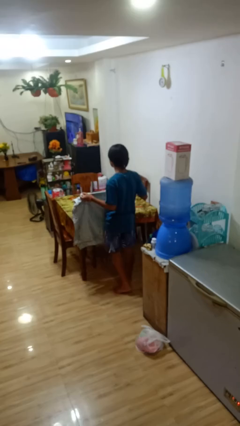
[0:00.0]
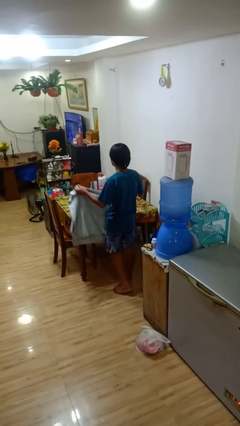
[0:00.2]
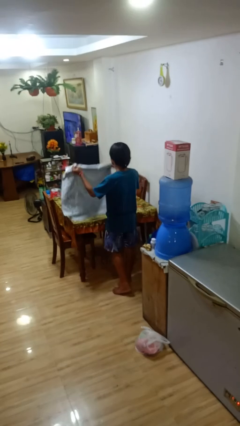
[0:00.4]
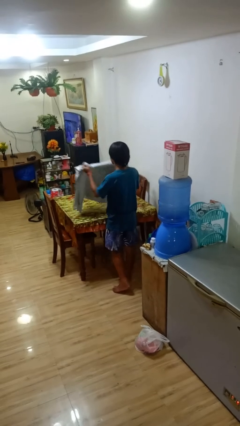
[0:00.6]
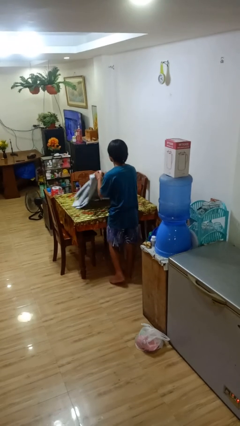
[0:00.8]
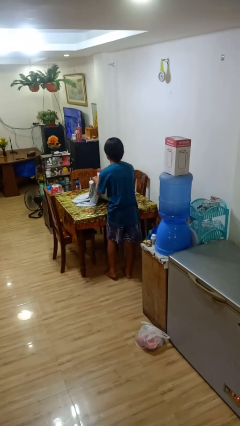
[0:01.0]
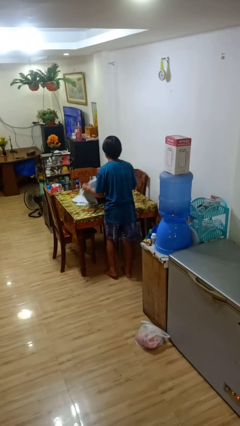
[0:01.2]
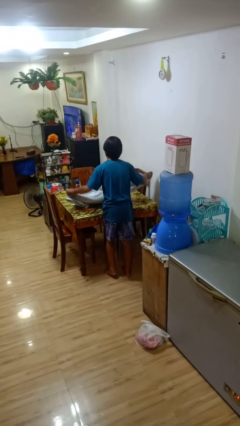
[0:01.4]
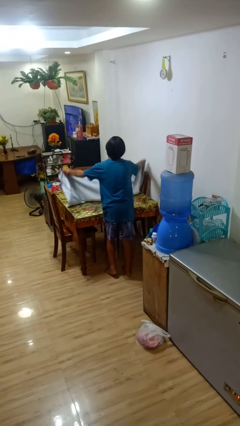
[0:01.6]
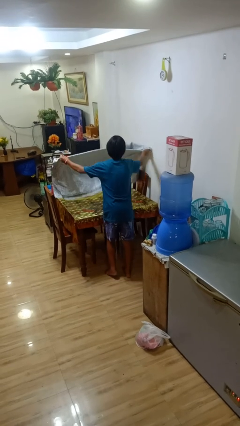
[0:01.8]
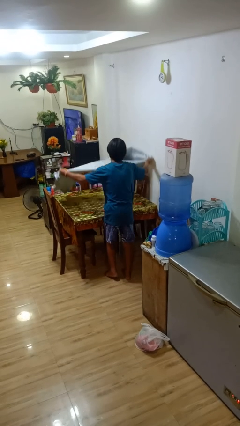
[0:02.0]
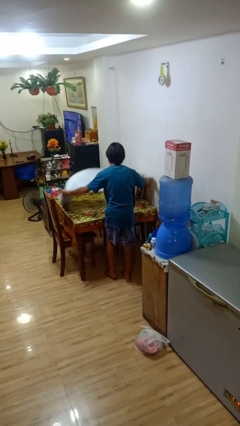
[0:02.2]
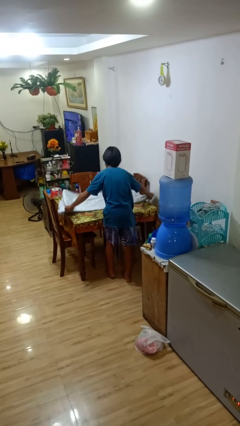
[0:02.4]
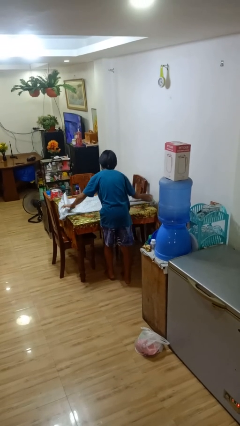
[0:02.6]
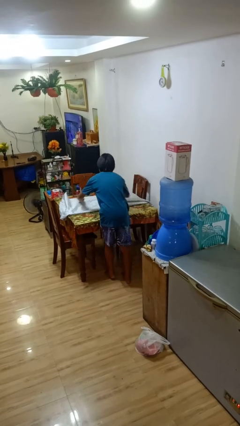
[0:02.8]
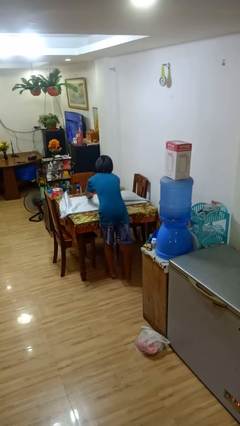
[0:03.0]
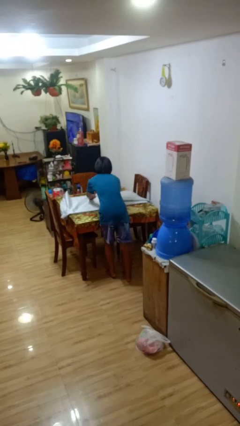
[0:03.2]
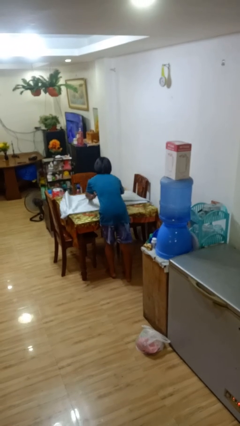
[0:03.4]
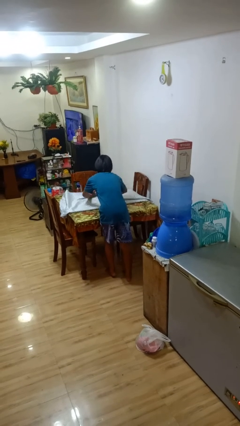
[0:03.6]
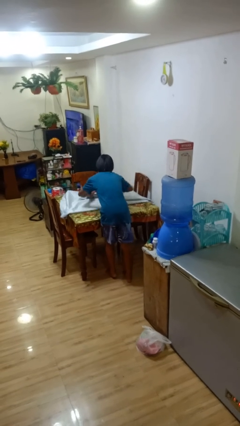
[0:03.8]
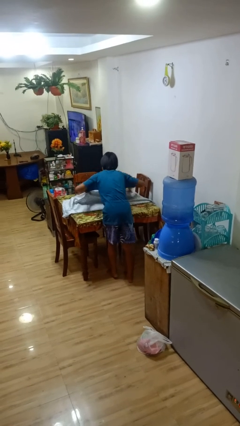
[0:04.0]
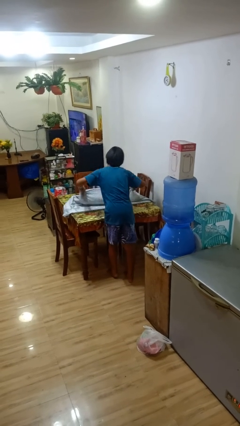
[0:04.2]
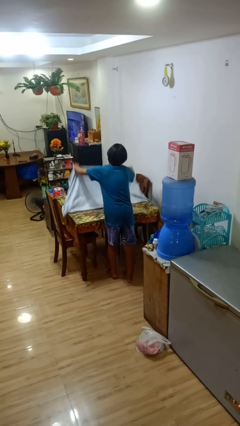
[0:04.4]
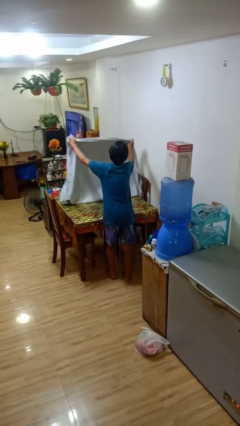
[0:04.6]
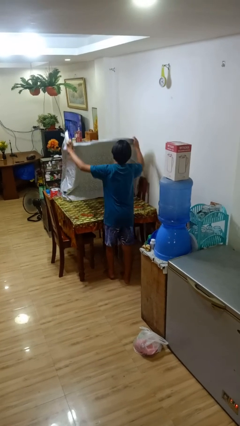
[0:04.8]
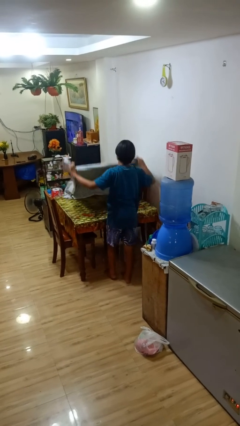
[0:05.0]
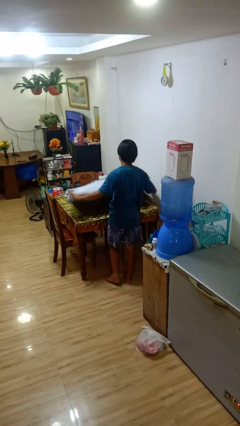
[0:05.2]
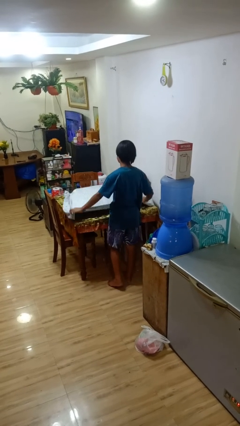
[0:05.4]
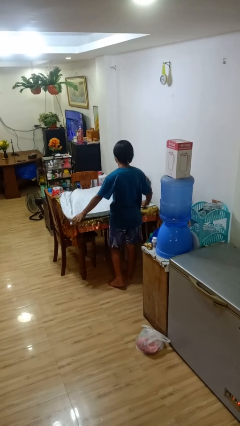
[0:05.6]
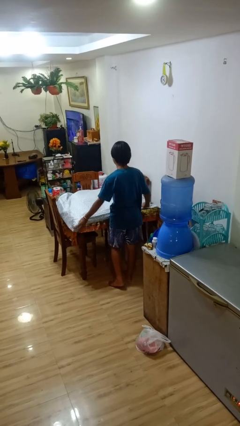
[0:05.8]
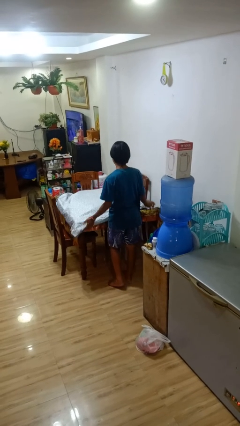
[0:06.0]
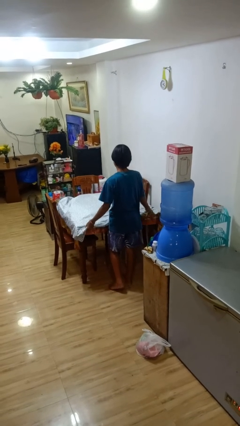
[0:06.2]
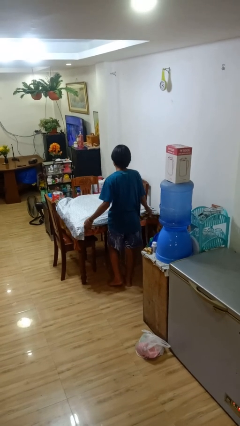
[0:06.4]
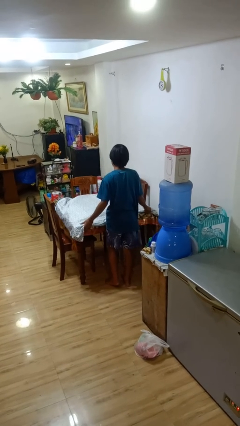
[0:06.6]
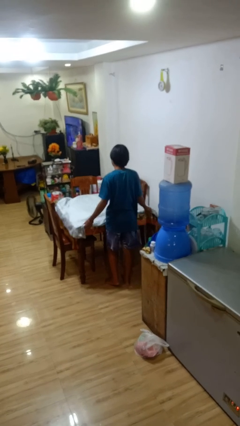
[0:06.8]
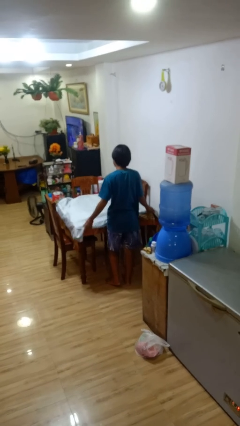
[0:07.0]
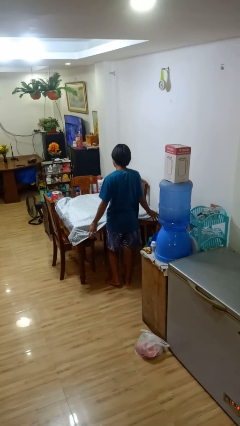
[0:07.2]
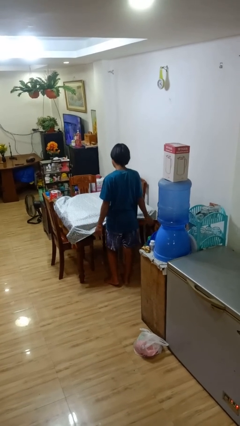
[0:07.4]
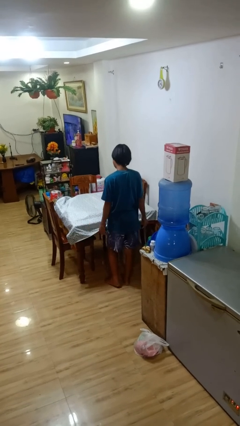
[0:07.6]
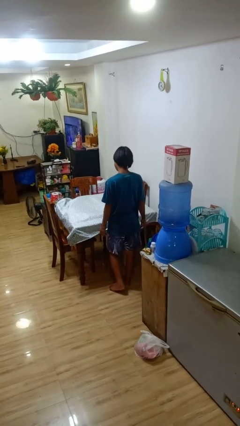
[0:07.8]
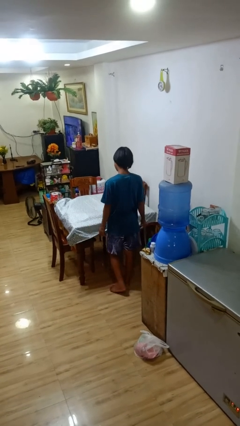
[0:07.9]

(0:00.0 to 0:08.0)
person spreads tablecloth

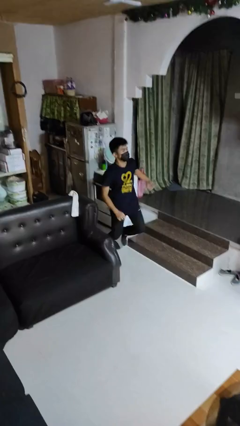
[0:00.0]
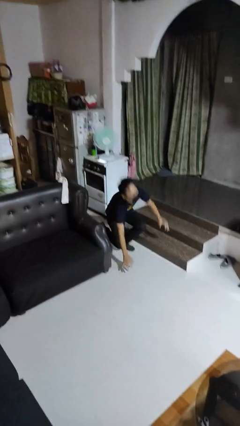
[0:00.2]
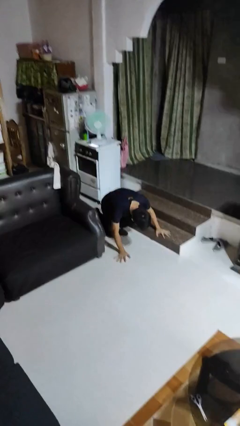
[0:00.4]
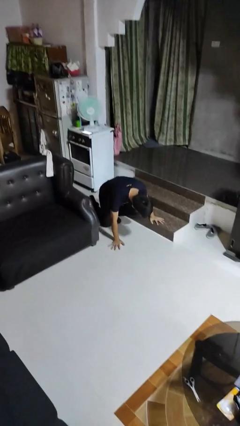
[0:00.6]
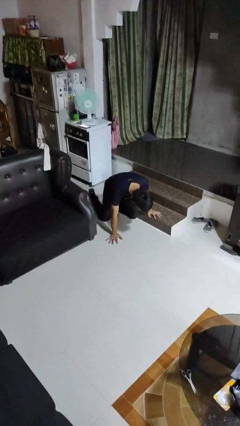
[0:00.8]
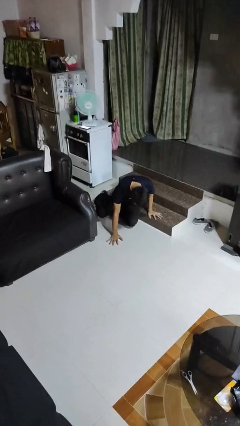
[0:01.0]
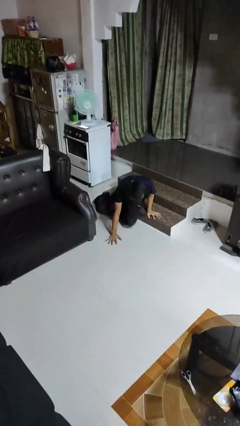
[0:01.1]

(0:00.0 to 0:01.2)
person trips on object on floor

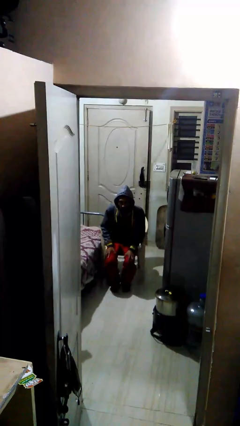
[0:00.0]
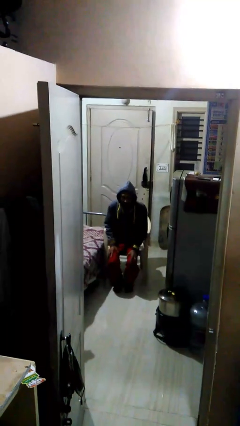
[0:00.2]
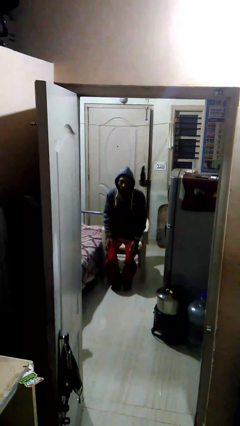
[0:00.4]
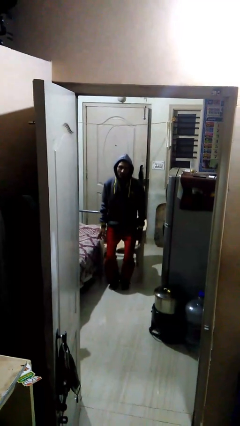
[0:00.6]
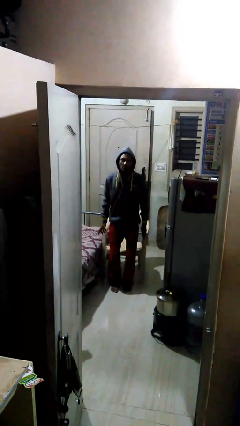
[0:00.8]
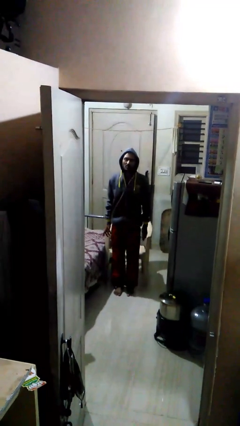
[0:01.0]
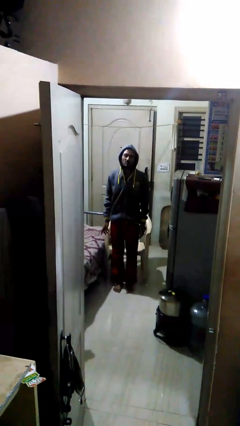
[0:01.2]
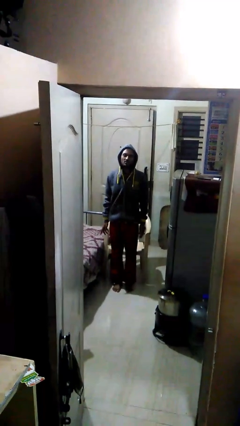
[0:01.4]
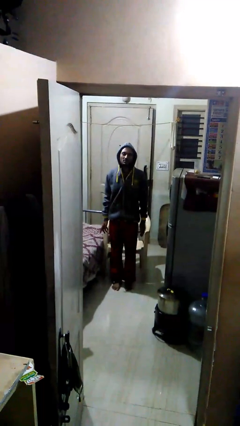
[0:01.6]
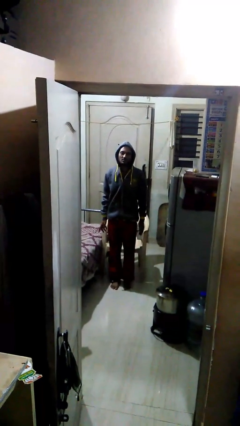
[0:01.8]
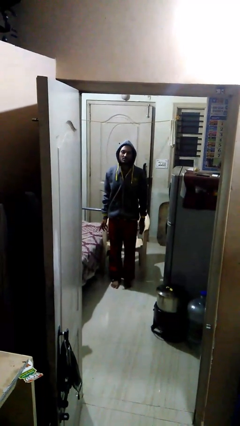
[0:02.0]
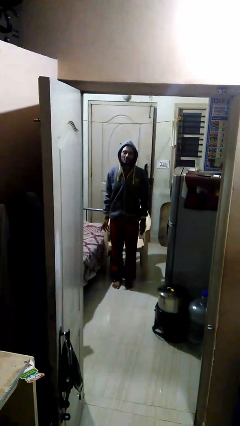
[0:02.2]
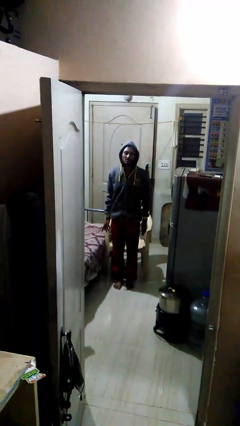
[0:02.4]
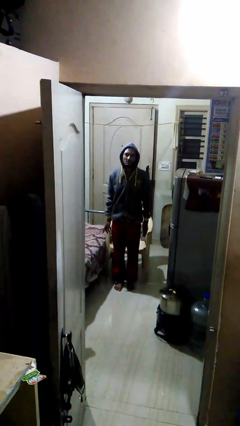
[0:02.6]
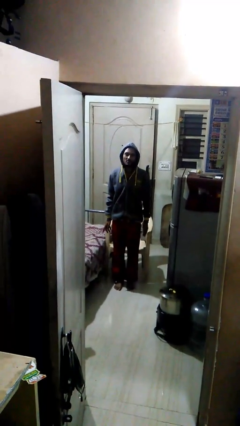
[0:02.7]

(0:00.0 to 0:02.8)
person sits down

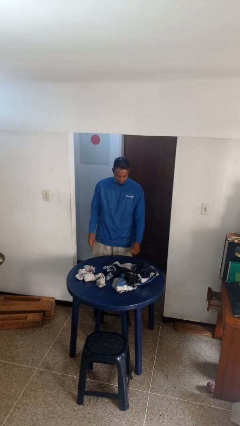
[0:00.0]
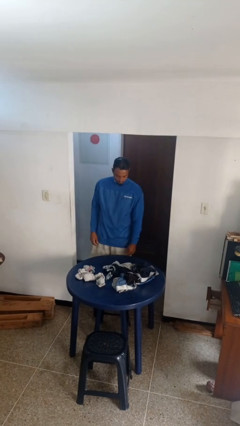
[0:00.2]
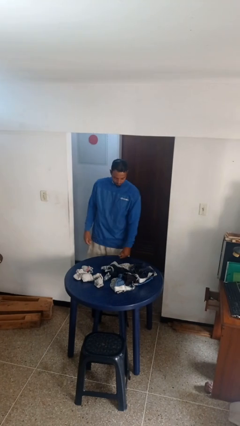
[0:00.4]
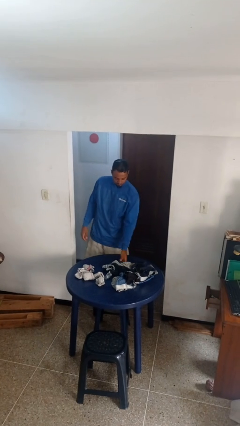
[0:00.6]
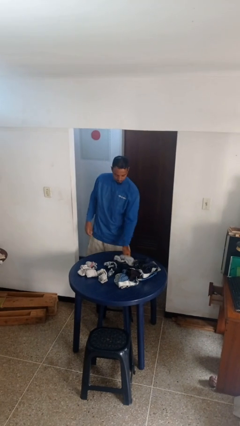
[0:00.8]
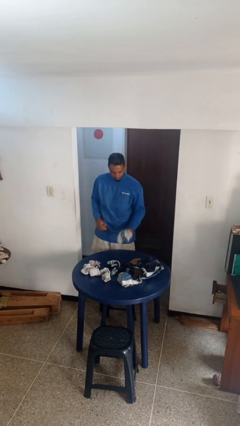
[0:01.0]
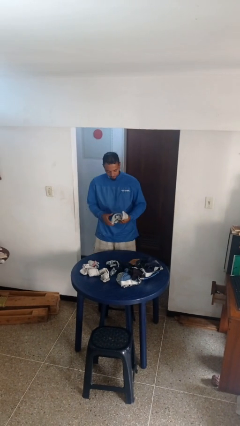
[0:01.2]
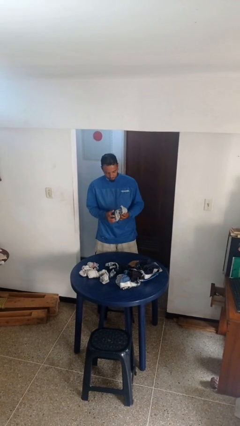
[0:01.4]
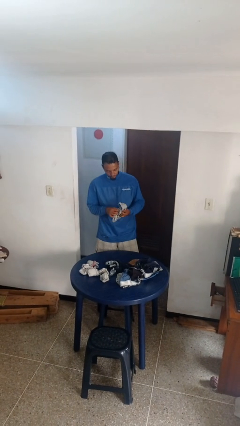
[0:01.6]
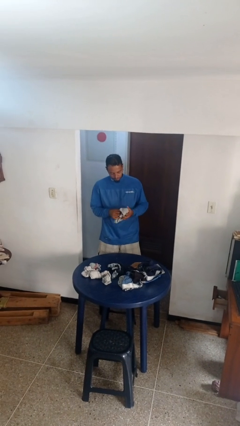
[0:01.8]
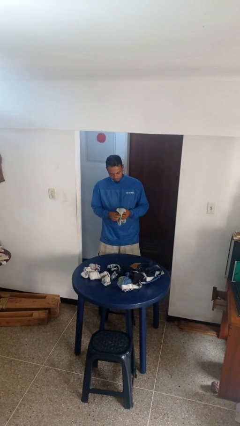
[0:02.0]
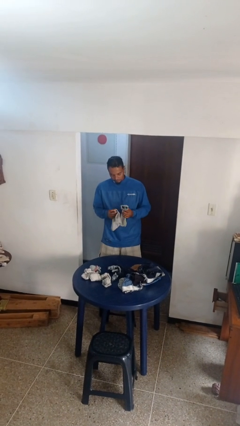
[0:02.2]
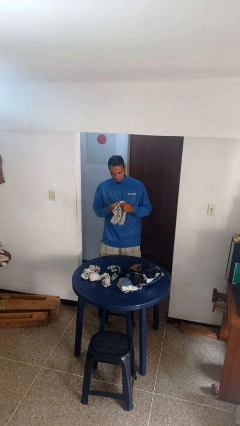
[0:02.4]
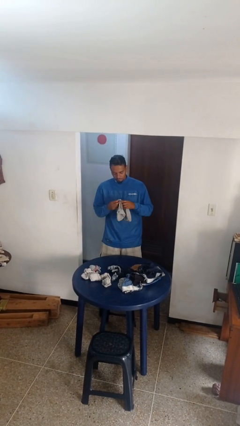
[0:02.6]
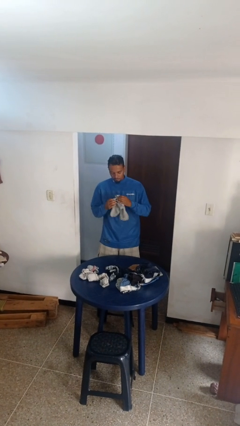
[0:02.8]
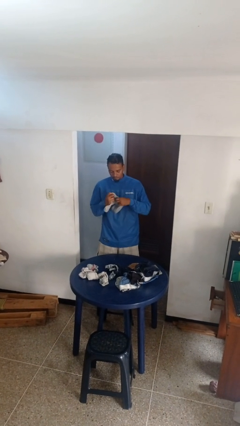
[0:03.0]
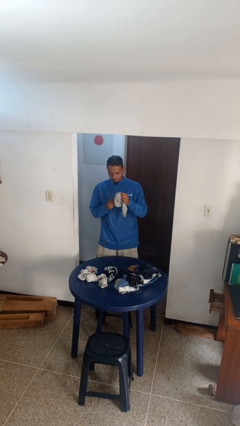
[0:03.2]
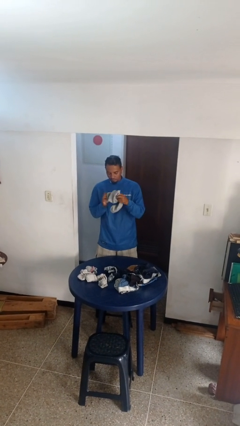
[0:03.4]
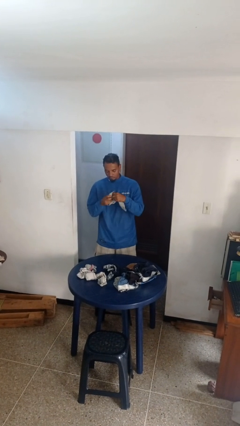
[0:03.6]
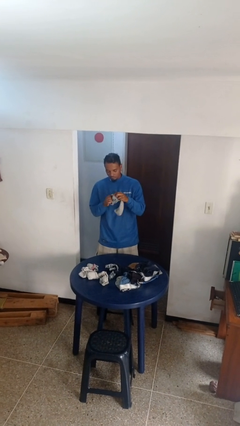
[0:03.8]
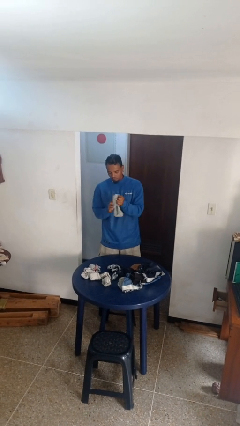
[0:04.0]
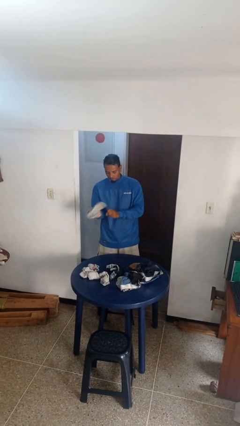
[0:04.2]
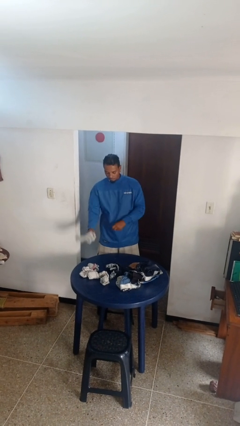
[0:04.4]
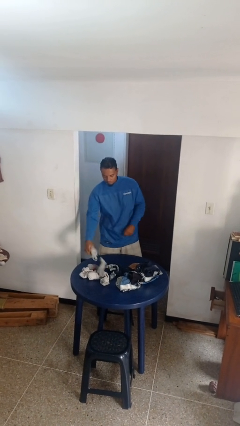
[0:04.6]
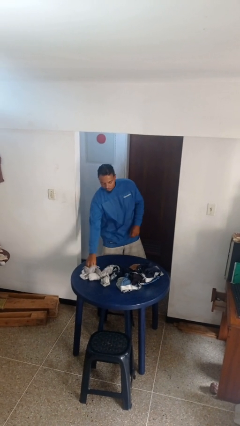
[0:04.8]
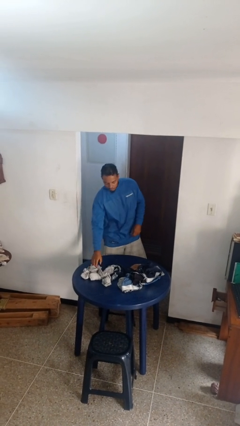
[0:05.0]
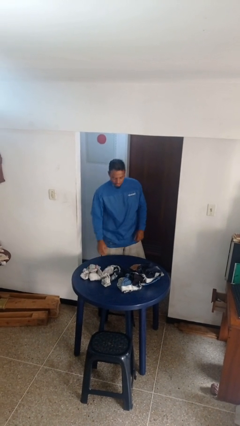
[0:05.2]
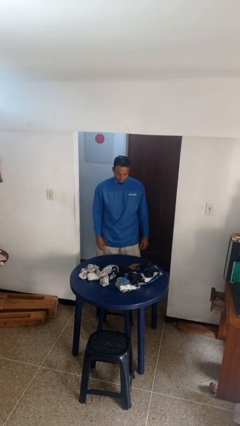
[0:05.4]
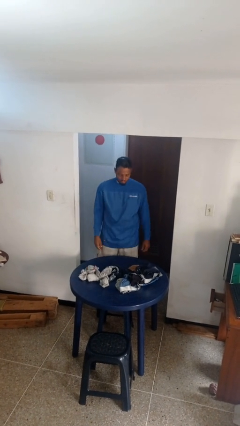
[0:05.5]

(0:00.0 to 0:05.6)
person folds socks
